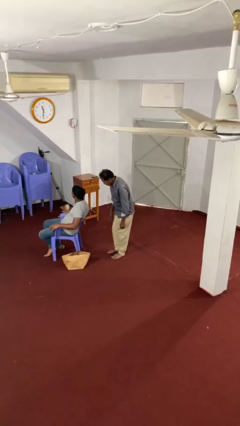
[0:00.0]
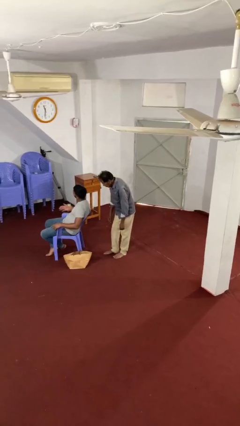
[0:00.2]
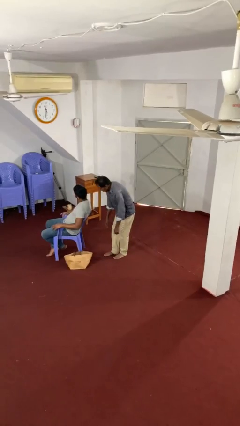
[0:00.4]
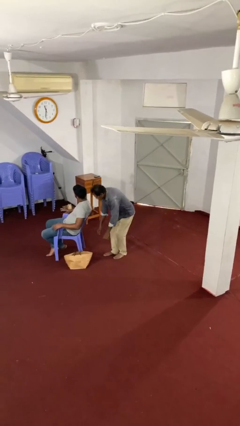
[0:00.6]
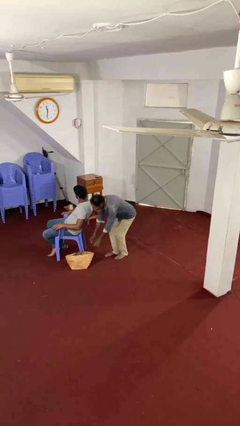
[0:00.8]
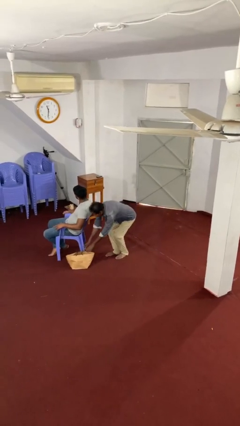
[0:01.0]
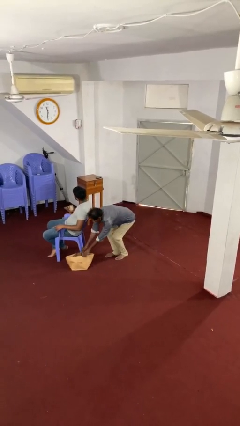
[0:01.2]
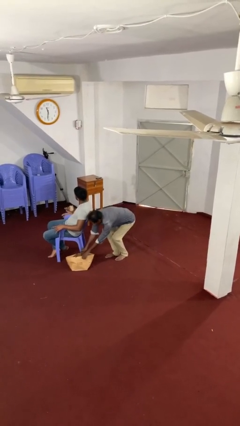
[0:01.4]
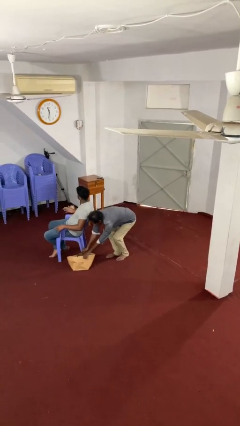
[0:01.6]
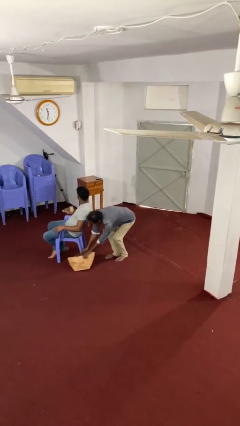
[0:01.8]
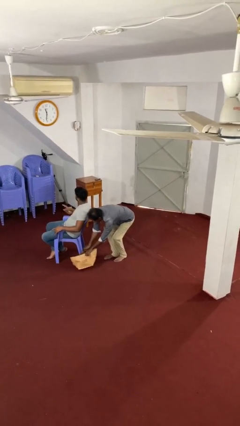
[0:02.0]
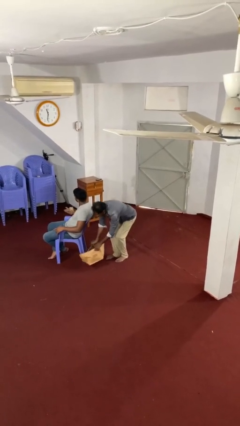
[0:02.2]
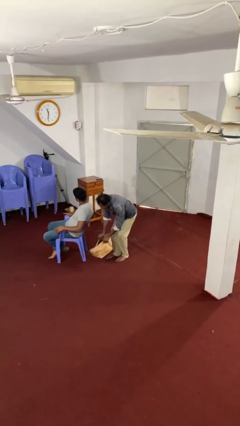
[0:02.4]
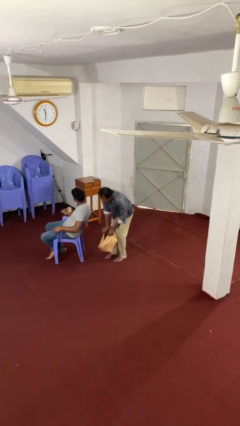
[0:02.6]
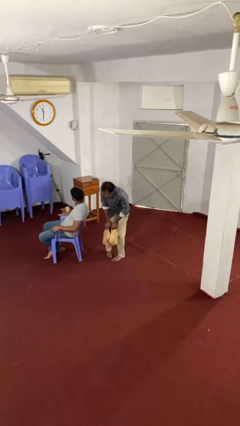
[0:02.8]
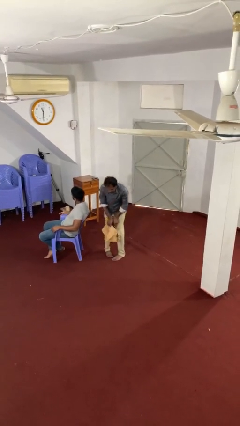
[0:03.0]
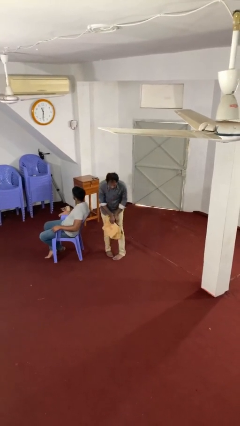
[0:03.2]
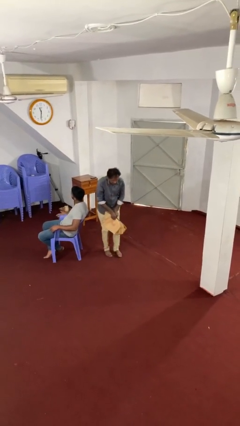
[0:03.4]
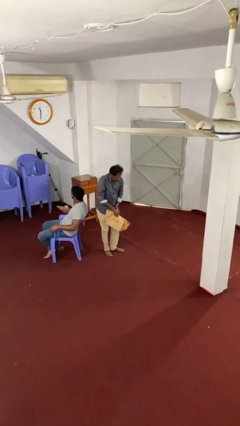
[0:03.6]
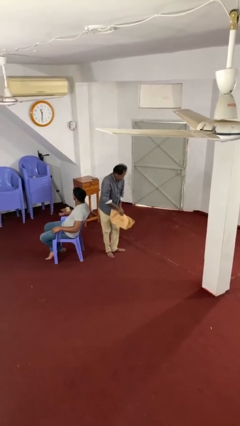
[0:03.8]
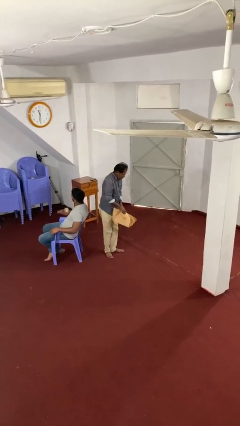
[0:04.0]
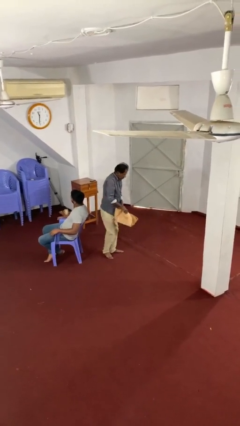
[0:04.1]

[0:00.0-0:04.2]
person steals object from person

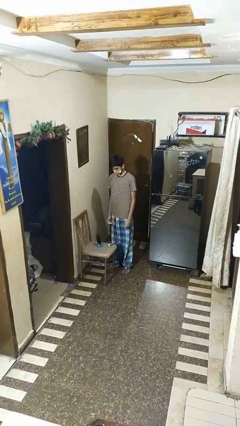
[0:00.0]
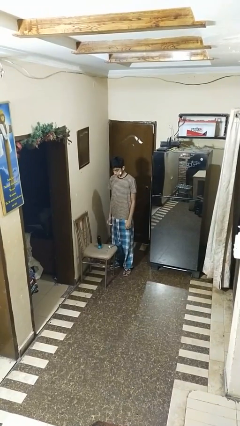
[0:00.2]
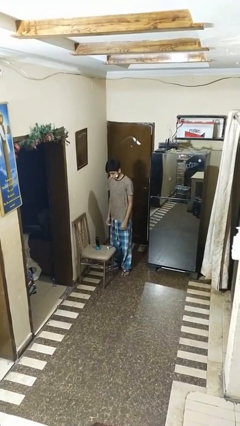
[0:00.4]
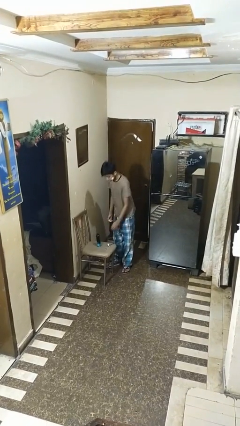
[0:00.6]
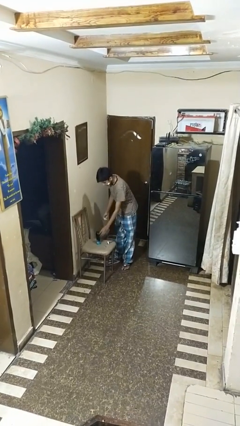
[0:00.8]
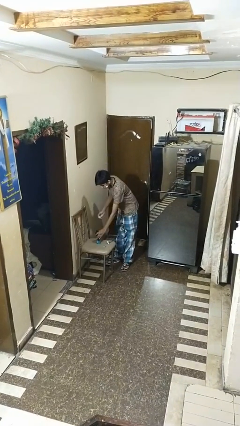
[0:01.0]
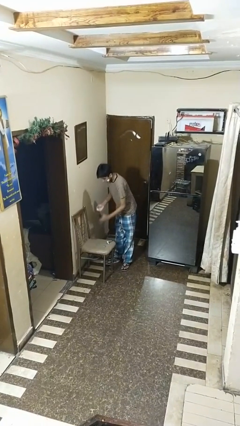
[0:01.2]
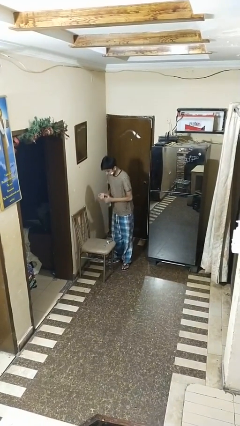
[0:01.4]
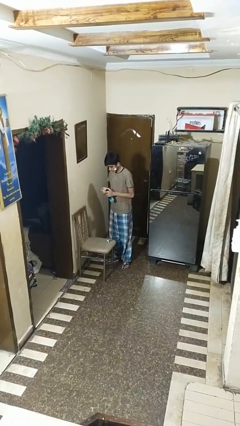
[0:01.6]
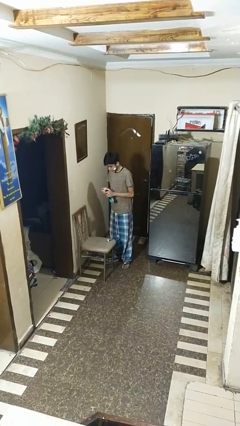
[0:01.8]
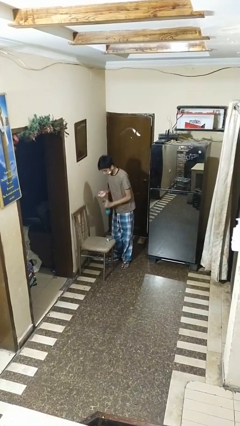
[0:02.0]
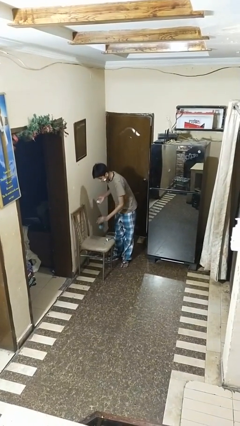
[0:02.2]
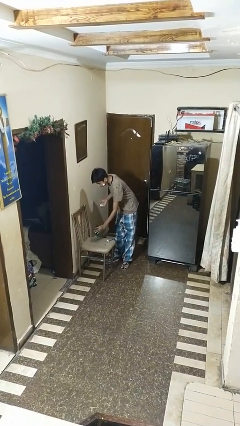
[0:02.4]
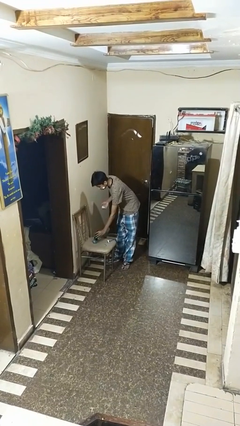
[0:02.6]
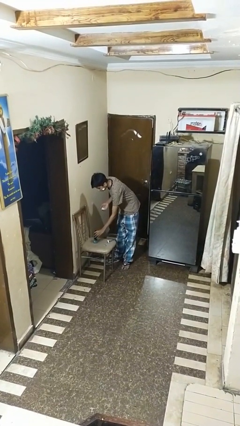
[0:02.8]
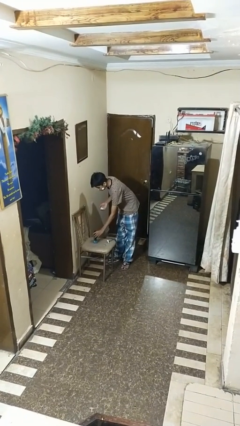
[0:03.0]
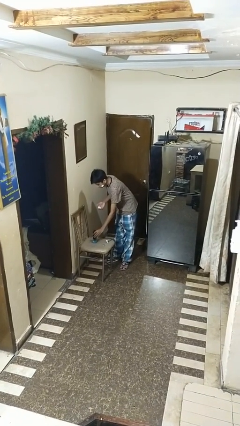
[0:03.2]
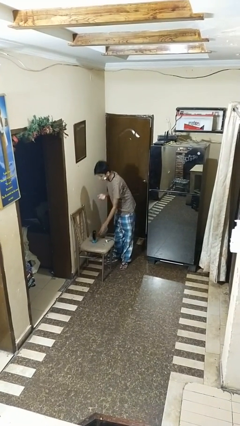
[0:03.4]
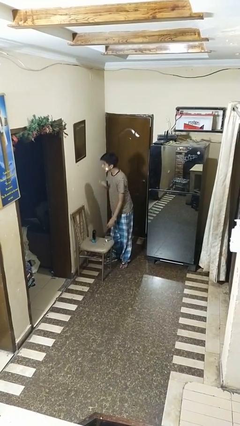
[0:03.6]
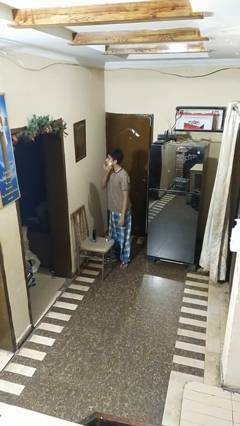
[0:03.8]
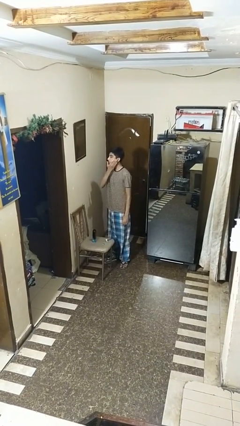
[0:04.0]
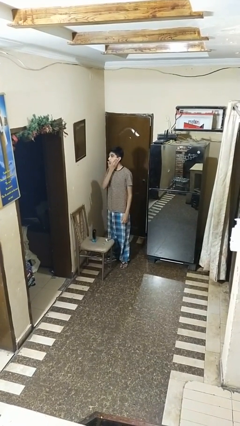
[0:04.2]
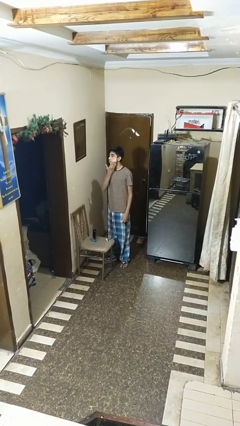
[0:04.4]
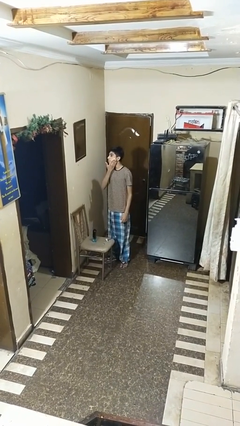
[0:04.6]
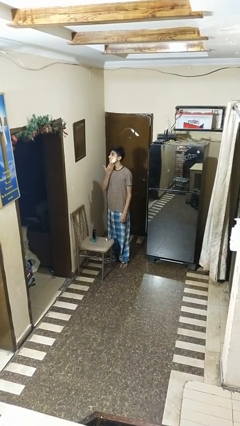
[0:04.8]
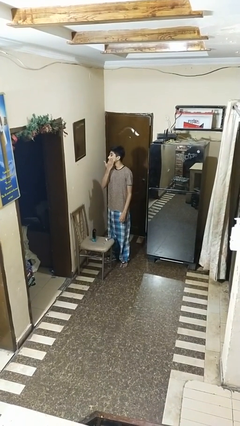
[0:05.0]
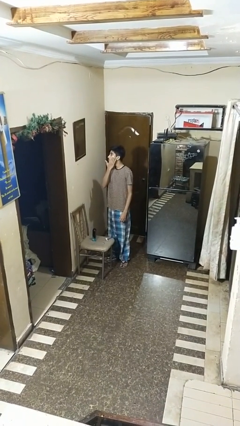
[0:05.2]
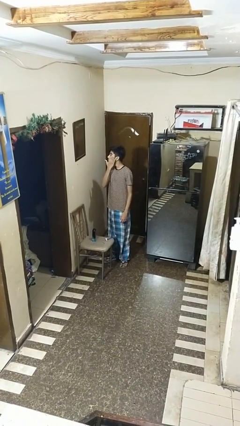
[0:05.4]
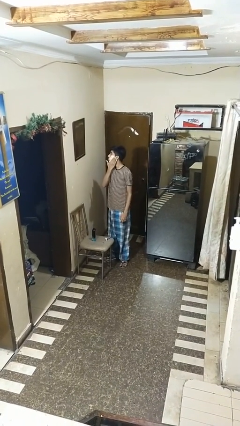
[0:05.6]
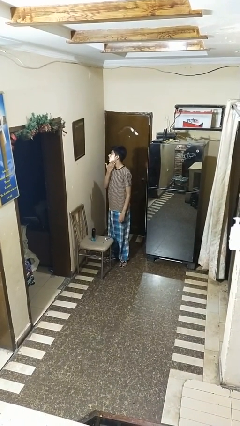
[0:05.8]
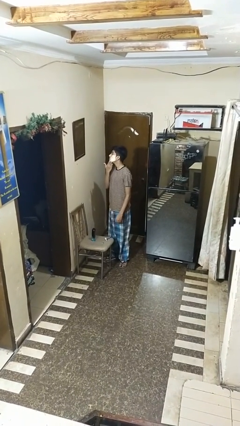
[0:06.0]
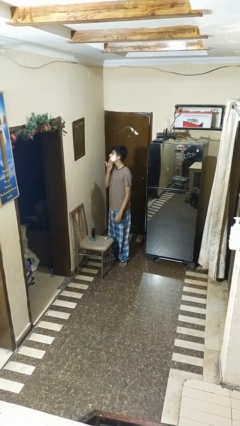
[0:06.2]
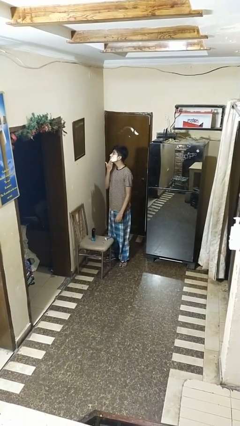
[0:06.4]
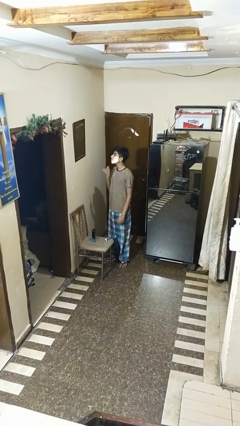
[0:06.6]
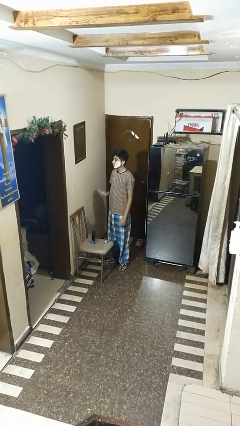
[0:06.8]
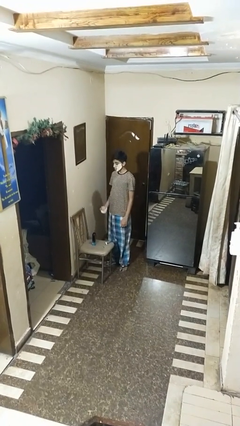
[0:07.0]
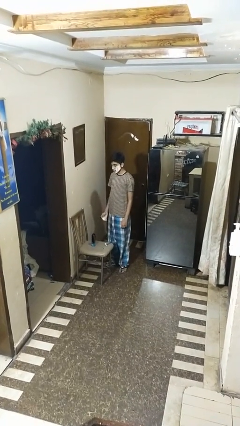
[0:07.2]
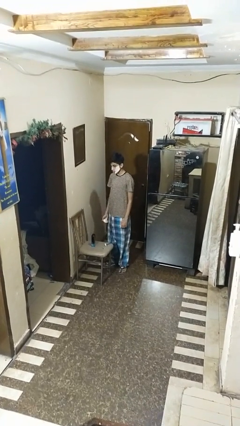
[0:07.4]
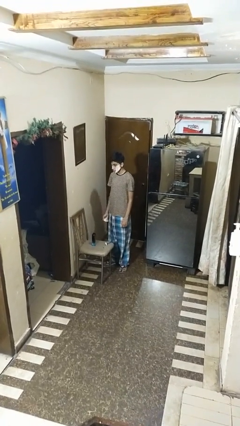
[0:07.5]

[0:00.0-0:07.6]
person applies shaving cream

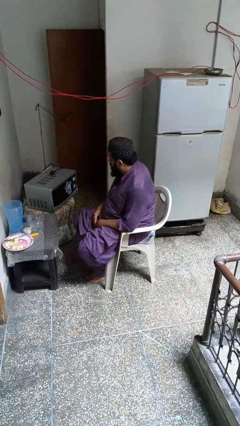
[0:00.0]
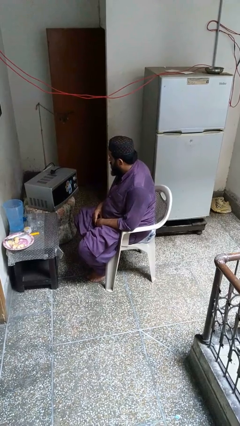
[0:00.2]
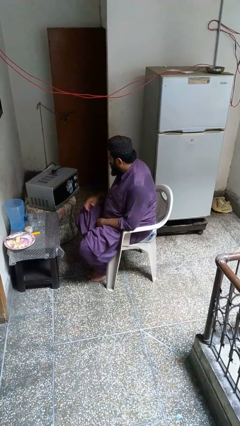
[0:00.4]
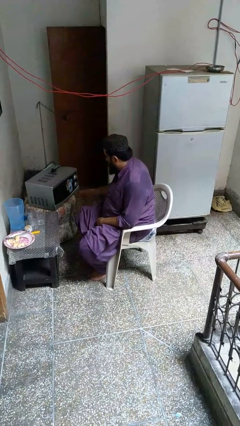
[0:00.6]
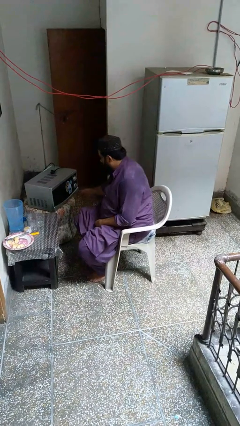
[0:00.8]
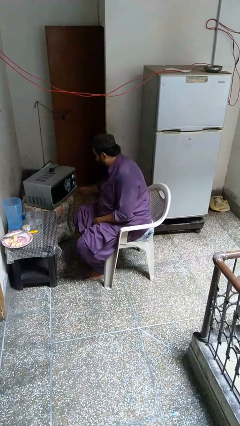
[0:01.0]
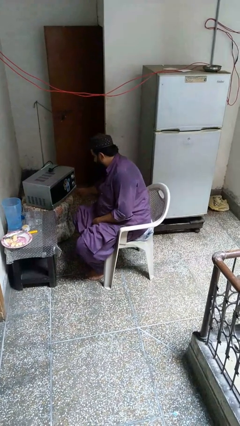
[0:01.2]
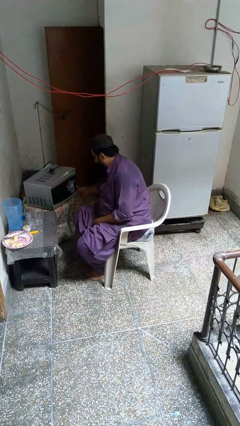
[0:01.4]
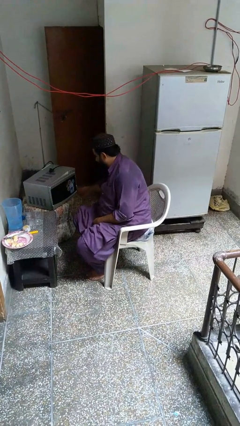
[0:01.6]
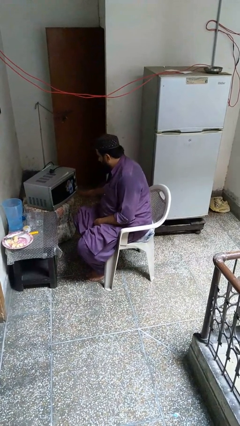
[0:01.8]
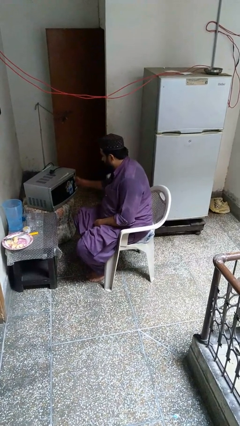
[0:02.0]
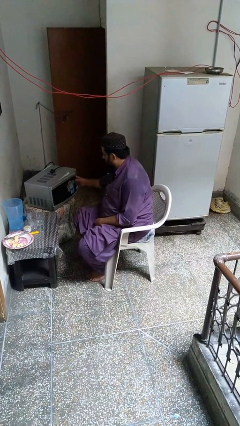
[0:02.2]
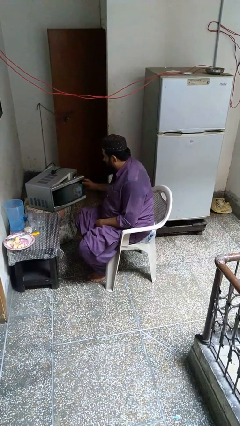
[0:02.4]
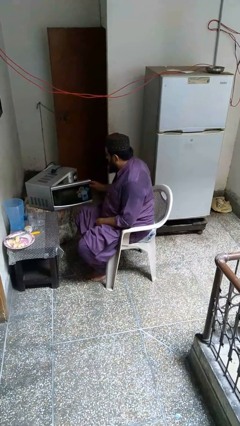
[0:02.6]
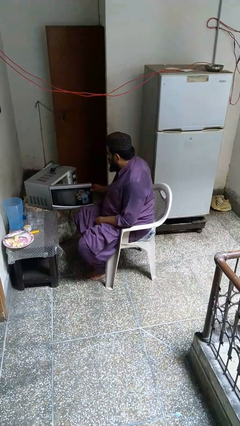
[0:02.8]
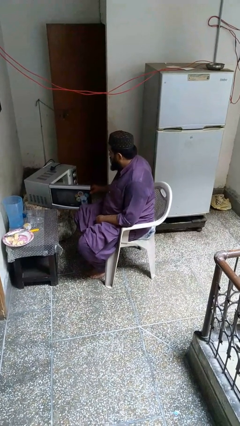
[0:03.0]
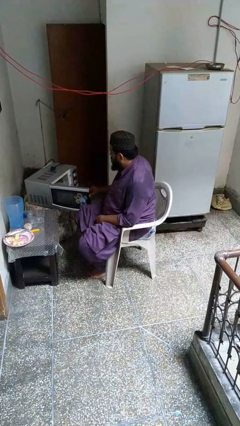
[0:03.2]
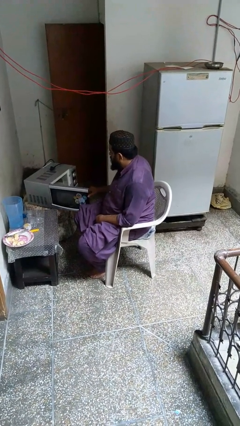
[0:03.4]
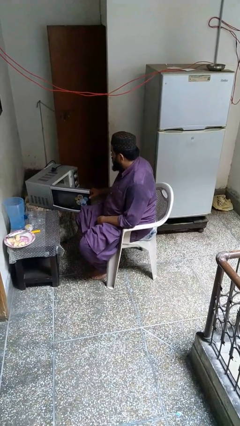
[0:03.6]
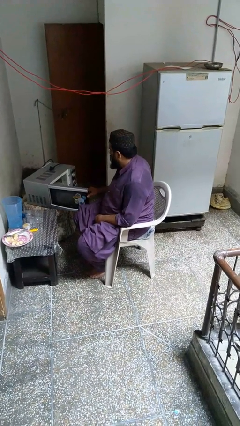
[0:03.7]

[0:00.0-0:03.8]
person opens microwave

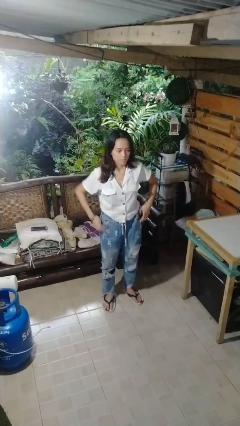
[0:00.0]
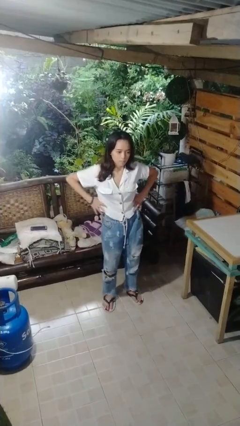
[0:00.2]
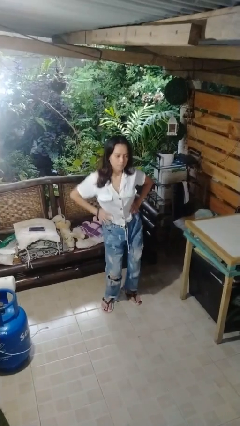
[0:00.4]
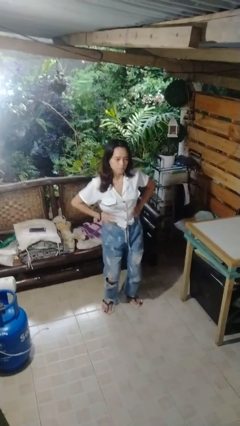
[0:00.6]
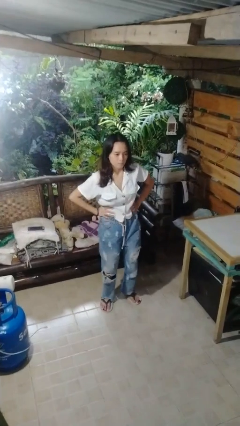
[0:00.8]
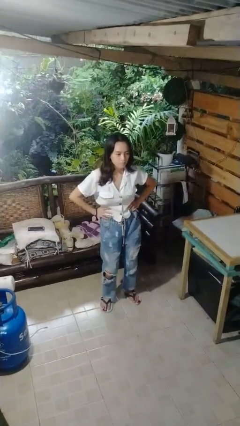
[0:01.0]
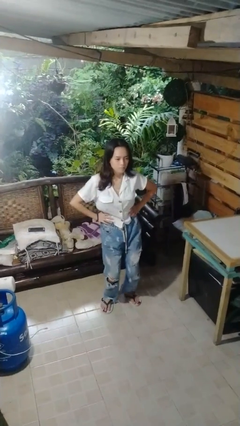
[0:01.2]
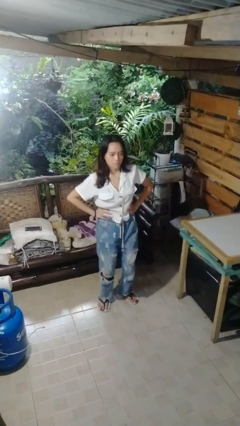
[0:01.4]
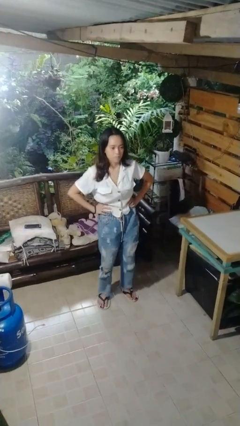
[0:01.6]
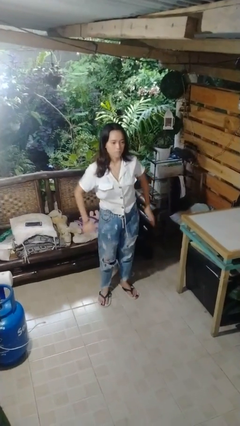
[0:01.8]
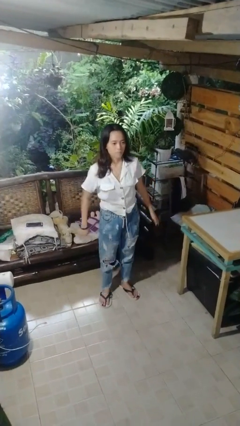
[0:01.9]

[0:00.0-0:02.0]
person wiggles hips
